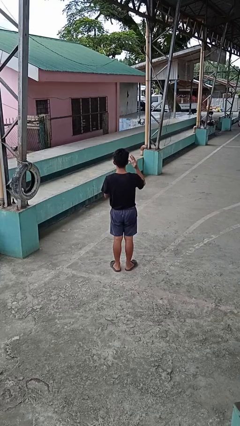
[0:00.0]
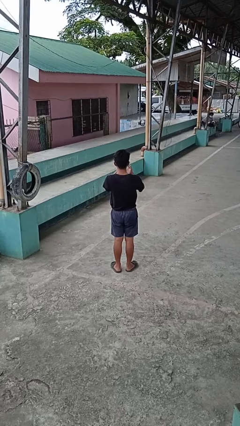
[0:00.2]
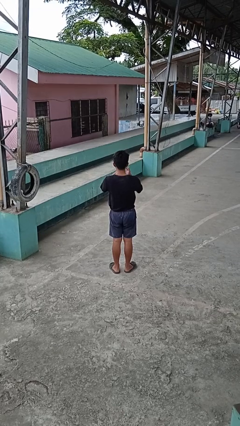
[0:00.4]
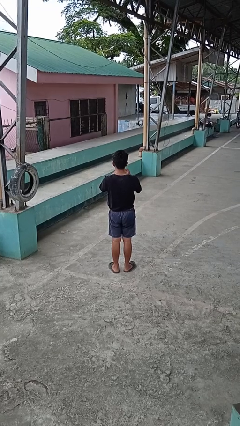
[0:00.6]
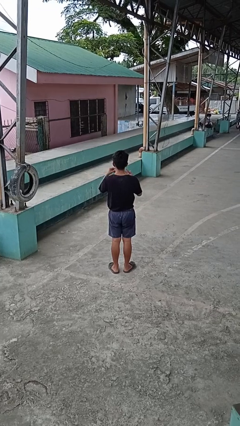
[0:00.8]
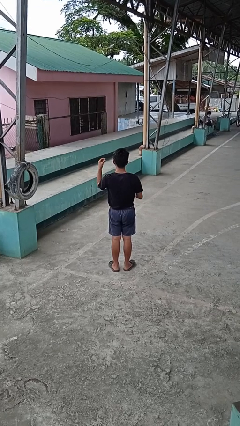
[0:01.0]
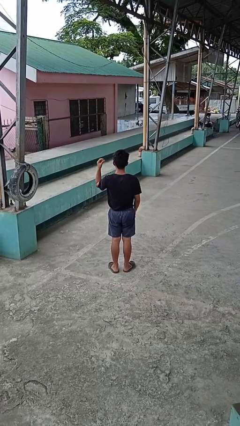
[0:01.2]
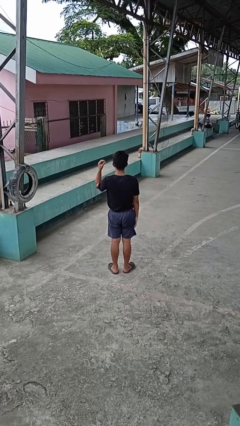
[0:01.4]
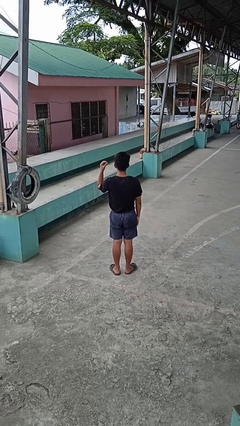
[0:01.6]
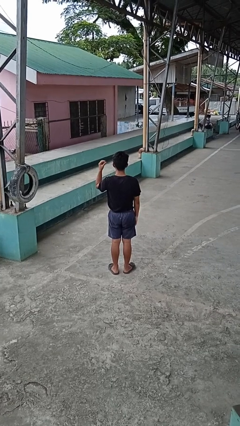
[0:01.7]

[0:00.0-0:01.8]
person takes off ring

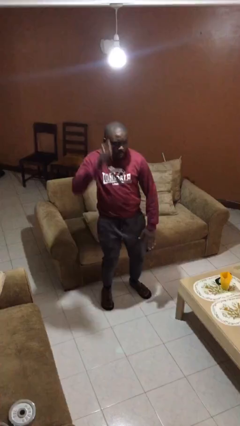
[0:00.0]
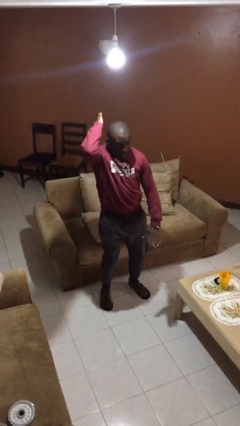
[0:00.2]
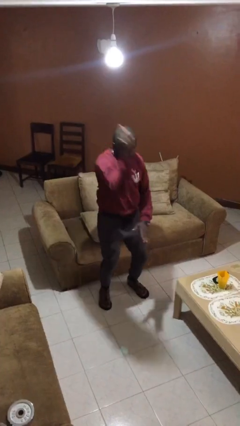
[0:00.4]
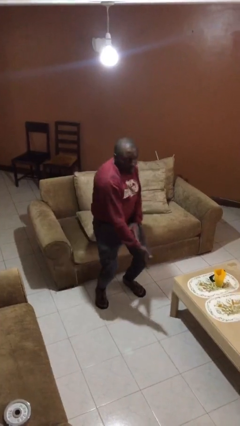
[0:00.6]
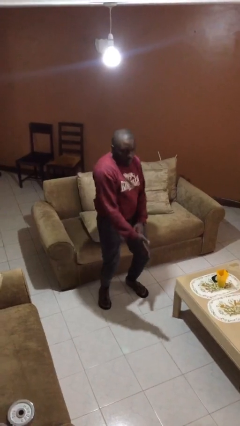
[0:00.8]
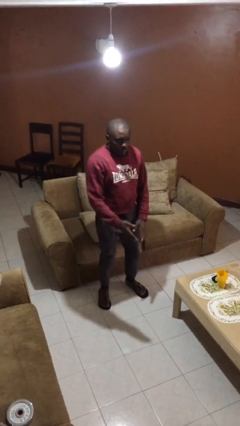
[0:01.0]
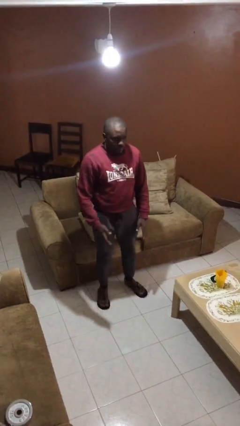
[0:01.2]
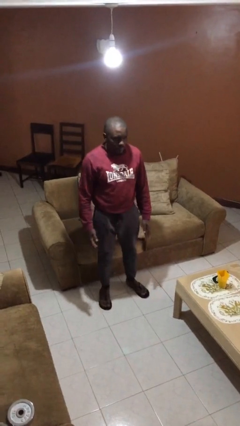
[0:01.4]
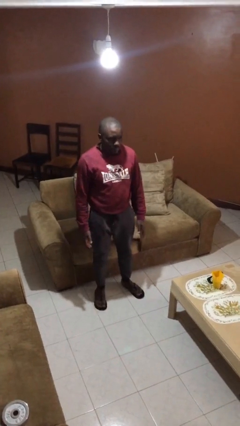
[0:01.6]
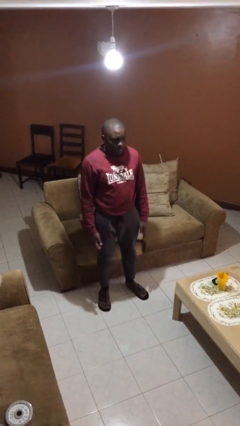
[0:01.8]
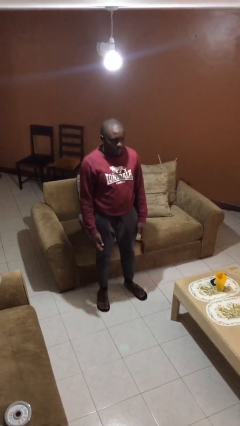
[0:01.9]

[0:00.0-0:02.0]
person karate chop

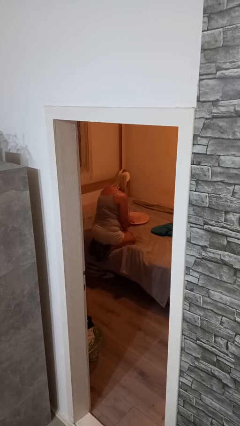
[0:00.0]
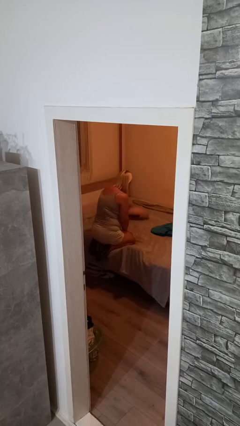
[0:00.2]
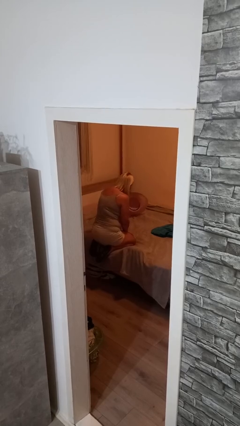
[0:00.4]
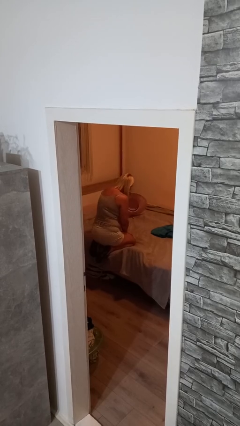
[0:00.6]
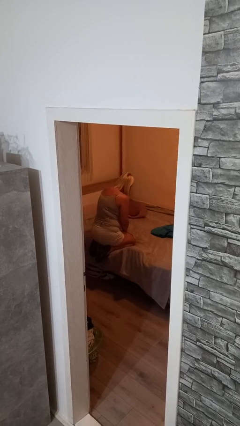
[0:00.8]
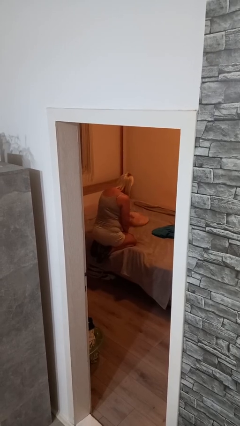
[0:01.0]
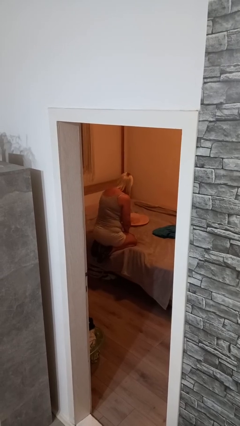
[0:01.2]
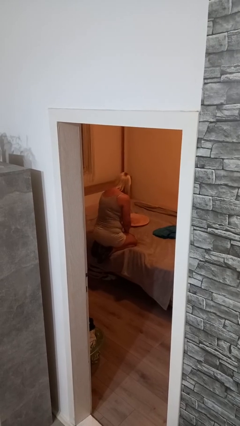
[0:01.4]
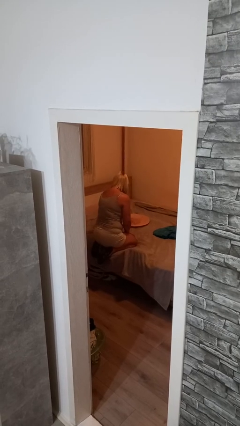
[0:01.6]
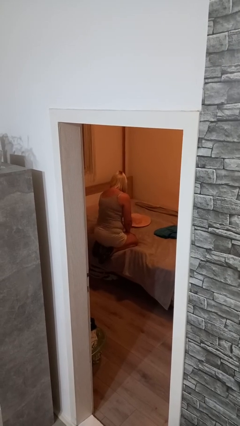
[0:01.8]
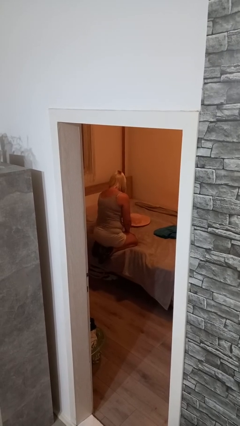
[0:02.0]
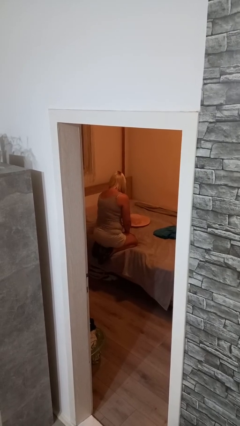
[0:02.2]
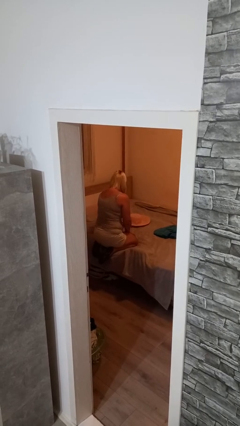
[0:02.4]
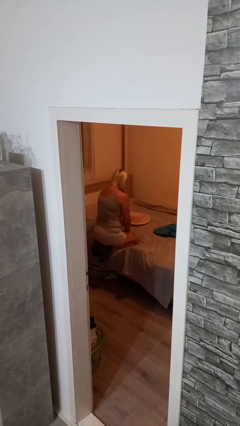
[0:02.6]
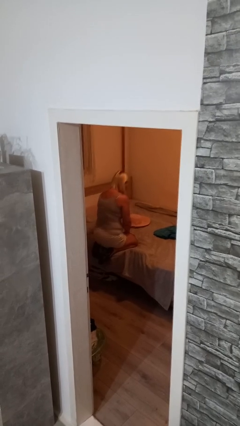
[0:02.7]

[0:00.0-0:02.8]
person searches under bed

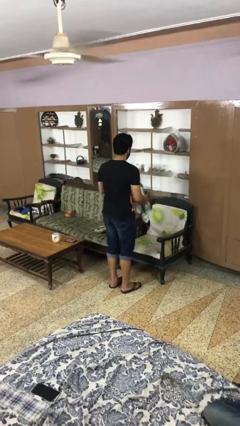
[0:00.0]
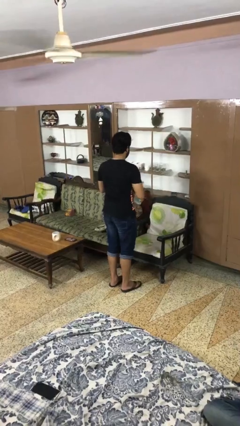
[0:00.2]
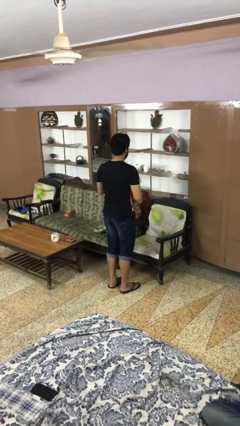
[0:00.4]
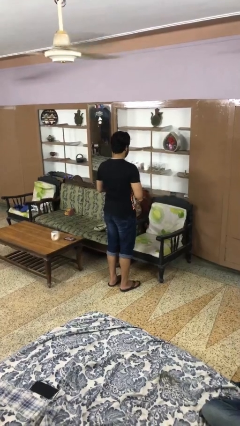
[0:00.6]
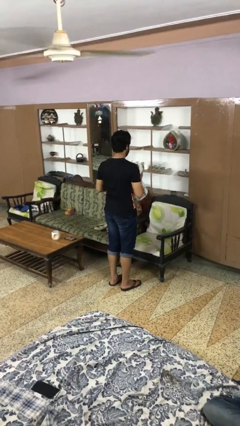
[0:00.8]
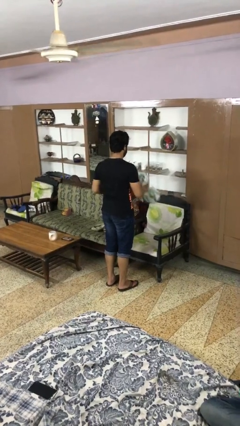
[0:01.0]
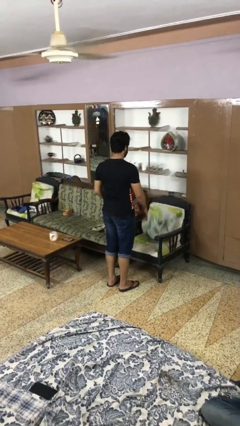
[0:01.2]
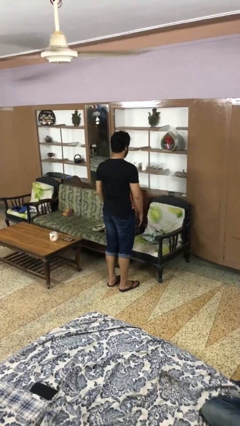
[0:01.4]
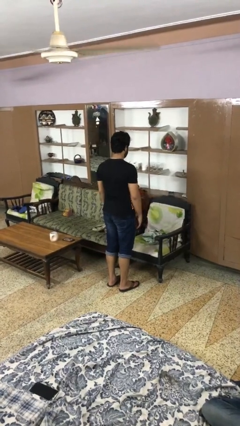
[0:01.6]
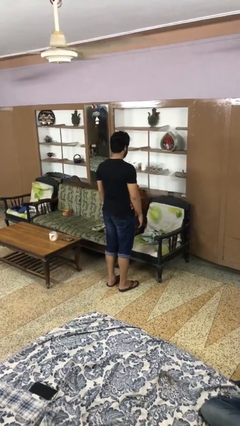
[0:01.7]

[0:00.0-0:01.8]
person puts down object into cabinet

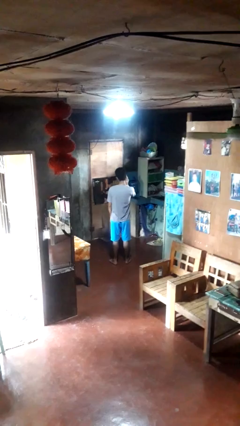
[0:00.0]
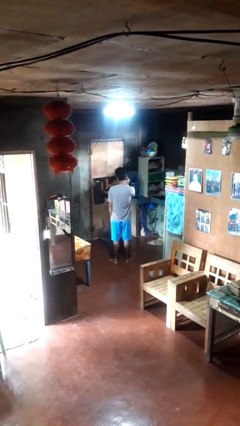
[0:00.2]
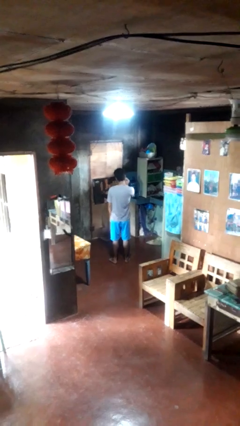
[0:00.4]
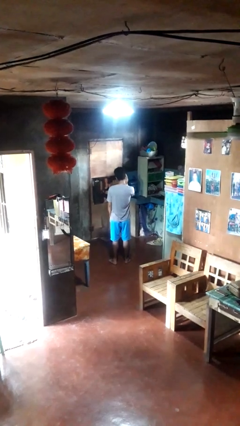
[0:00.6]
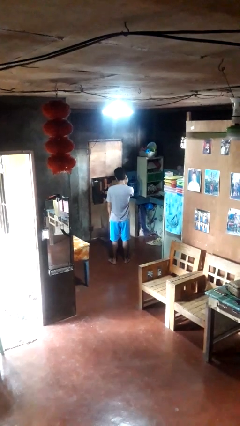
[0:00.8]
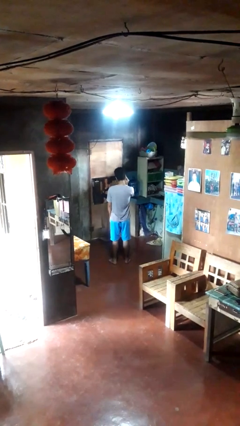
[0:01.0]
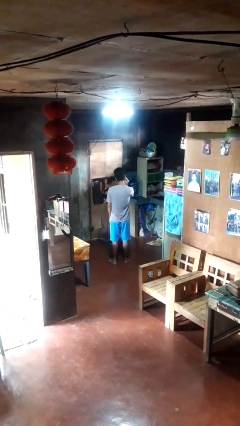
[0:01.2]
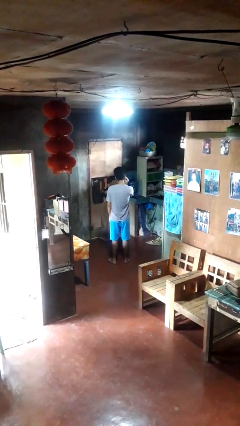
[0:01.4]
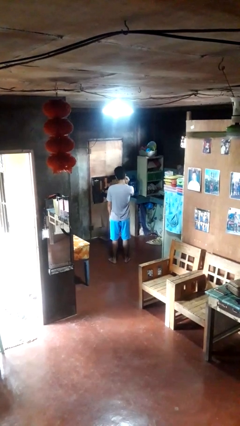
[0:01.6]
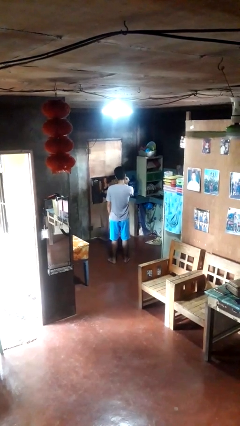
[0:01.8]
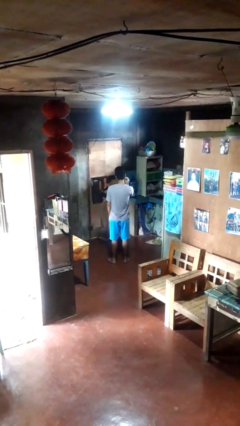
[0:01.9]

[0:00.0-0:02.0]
person touches earlobe

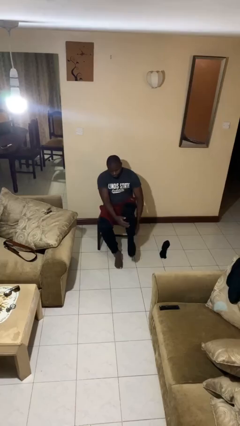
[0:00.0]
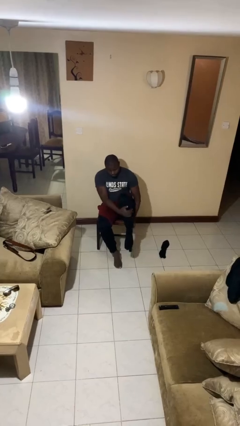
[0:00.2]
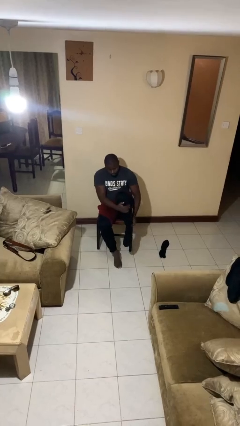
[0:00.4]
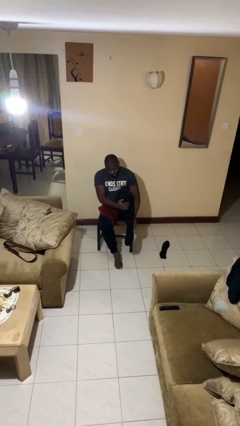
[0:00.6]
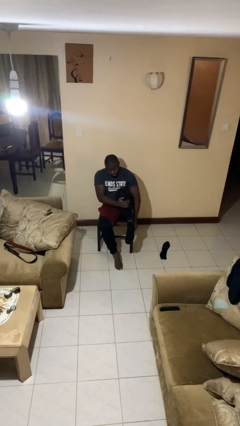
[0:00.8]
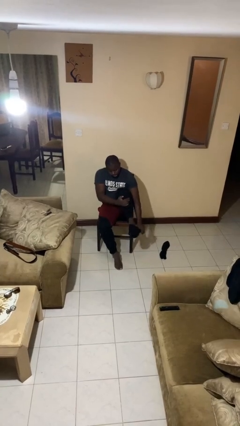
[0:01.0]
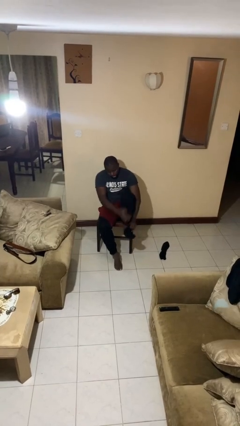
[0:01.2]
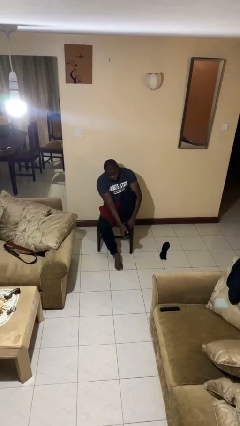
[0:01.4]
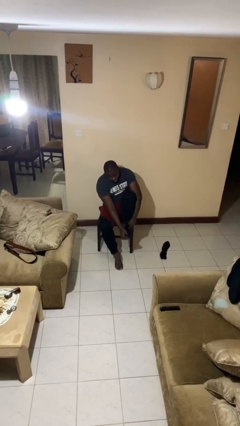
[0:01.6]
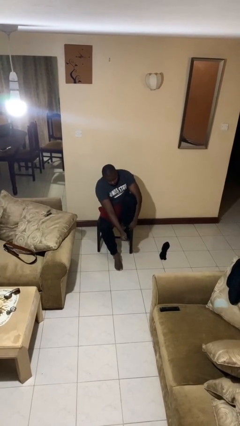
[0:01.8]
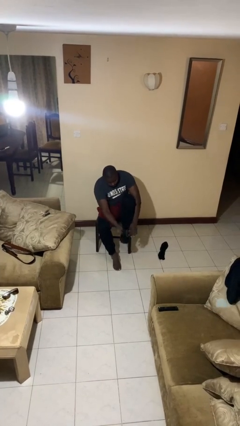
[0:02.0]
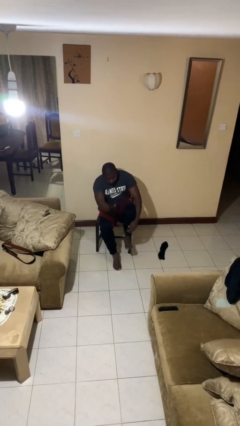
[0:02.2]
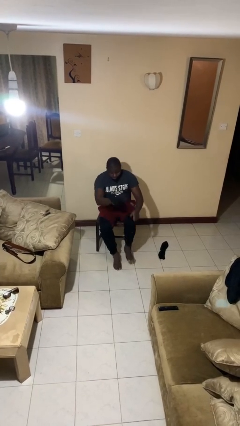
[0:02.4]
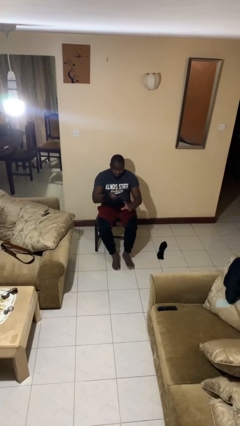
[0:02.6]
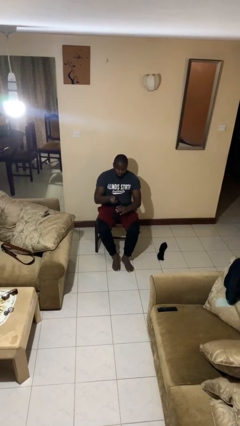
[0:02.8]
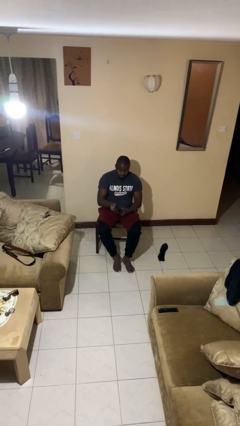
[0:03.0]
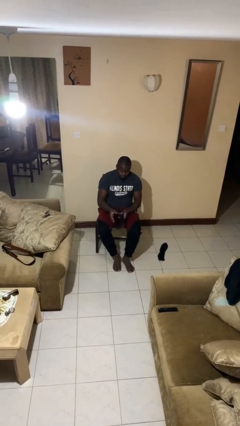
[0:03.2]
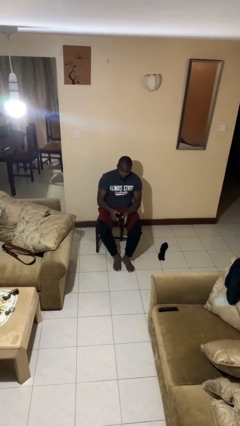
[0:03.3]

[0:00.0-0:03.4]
person takes off socks

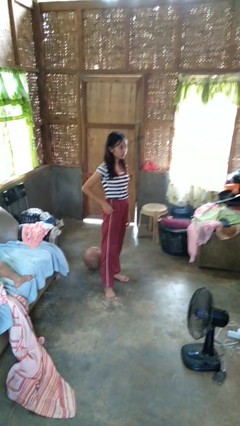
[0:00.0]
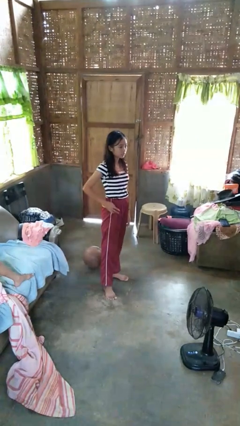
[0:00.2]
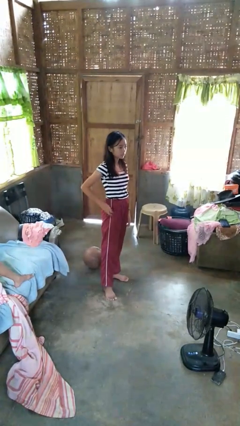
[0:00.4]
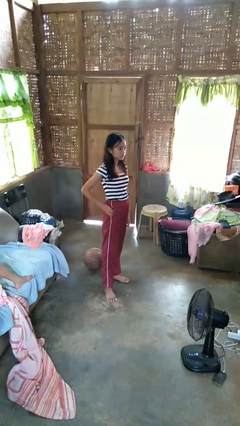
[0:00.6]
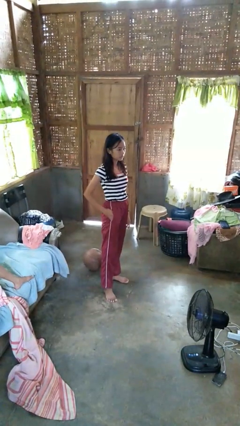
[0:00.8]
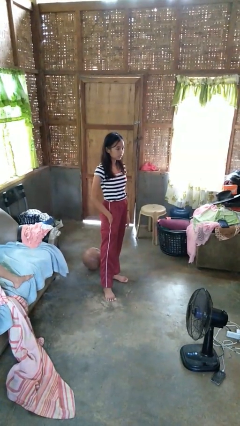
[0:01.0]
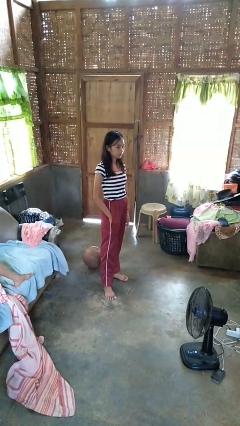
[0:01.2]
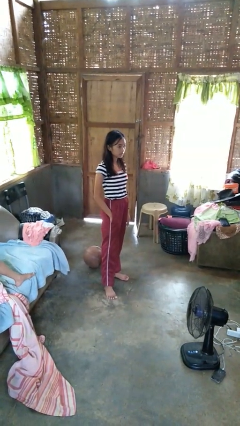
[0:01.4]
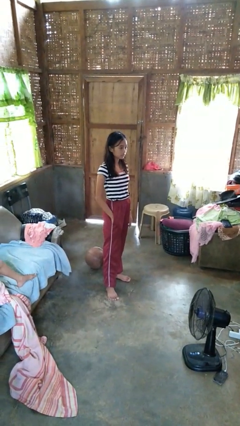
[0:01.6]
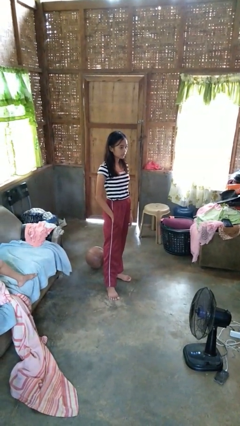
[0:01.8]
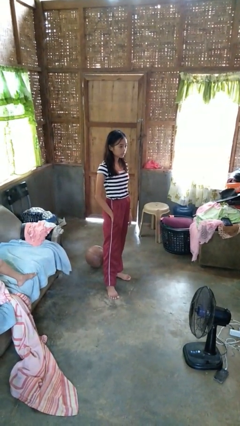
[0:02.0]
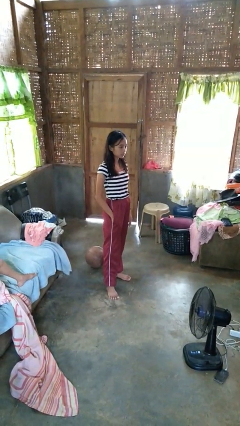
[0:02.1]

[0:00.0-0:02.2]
person puts hands in back pockets

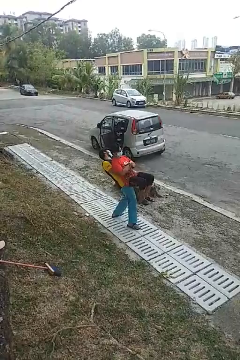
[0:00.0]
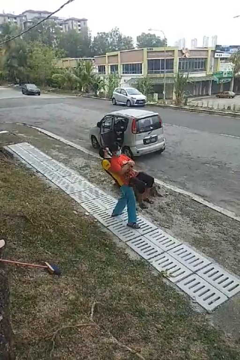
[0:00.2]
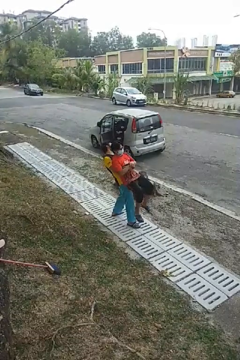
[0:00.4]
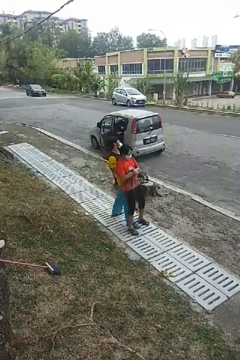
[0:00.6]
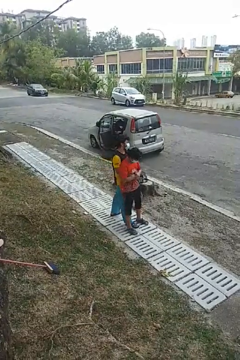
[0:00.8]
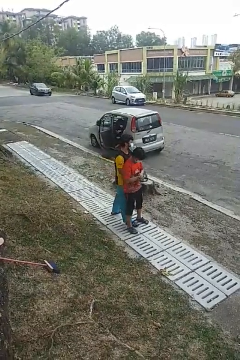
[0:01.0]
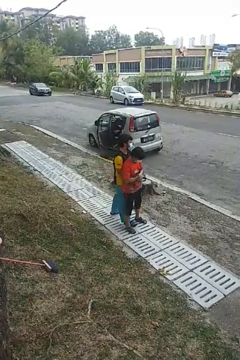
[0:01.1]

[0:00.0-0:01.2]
person puts down person
